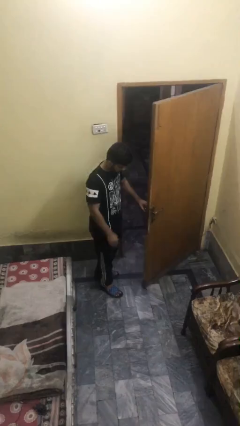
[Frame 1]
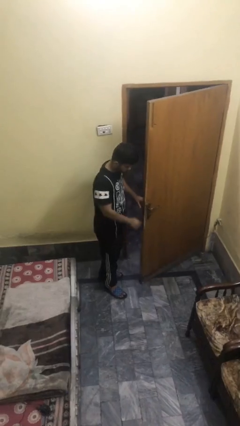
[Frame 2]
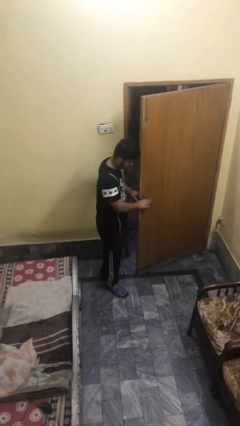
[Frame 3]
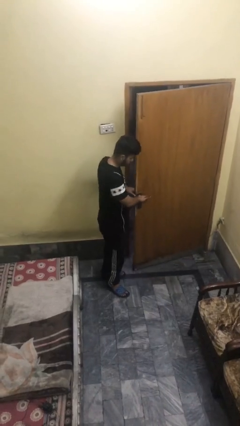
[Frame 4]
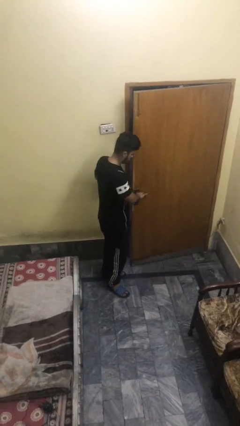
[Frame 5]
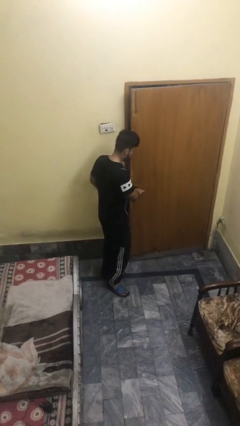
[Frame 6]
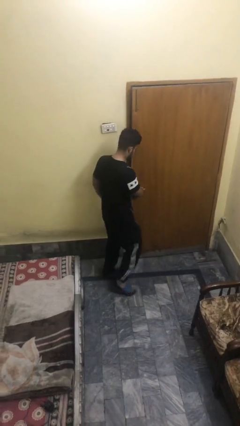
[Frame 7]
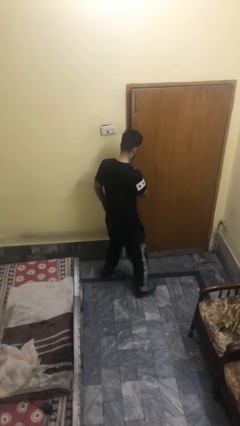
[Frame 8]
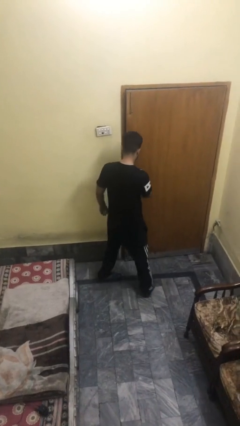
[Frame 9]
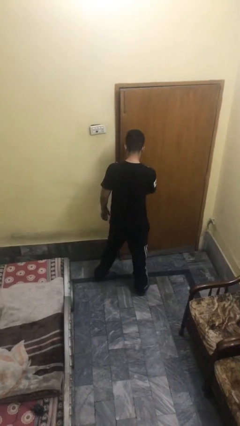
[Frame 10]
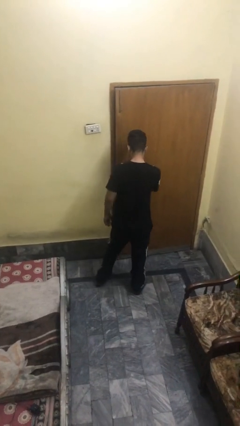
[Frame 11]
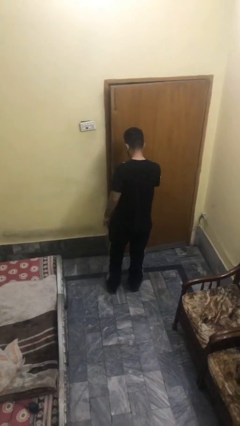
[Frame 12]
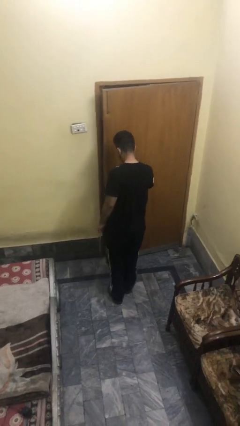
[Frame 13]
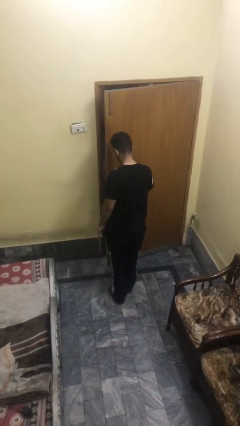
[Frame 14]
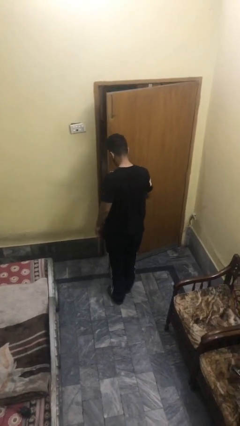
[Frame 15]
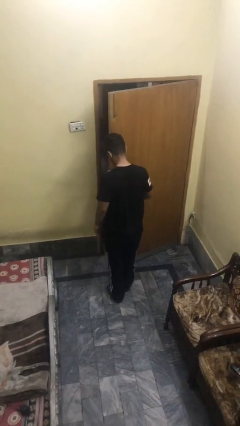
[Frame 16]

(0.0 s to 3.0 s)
person closes facility door

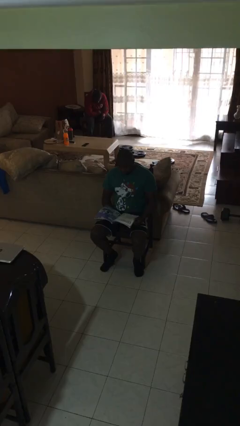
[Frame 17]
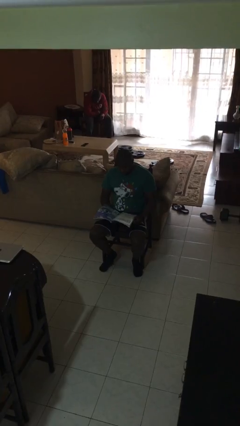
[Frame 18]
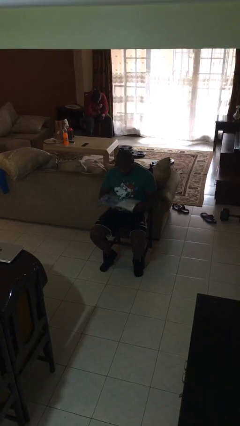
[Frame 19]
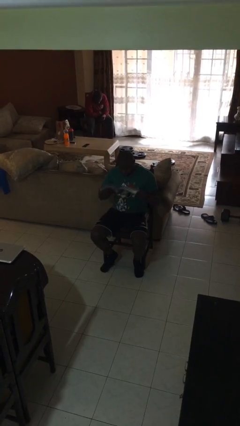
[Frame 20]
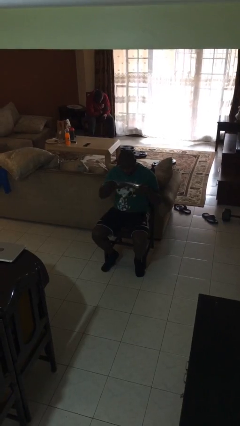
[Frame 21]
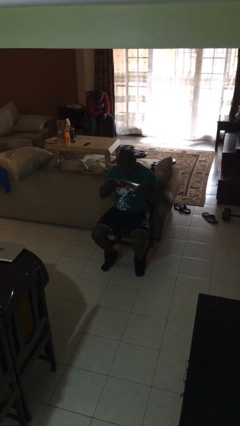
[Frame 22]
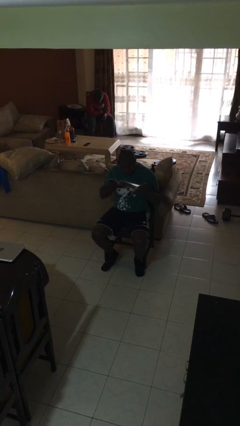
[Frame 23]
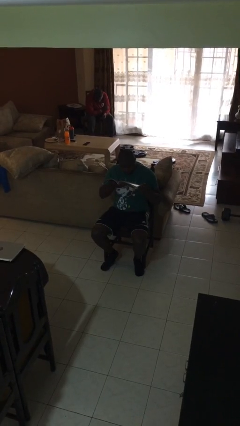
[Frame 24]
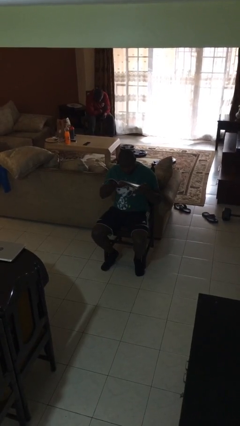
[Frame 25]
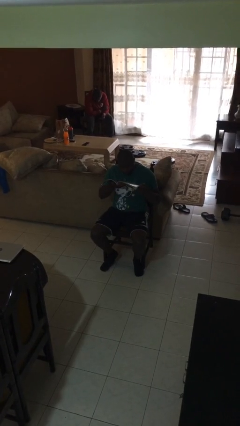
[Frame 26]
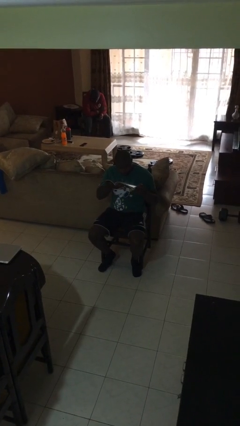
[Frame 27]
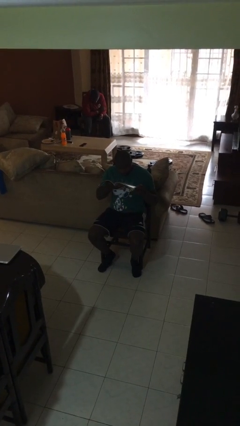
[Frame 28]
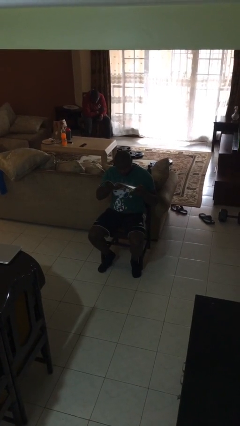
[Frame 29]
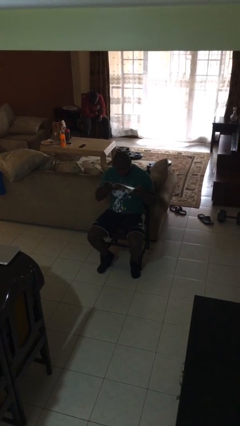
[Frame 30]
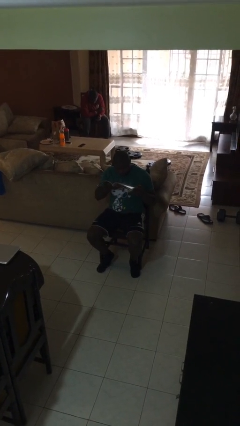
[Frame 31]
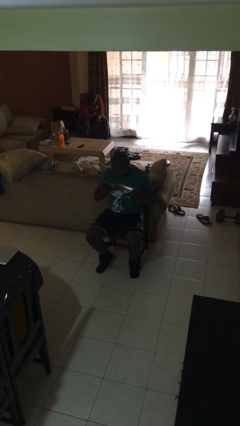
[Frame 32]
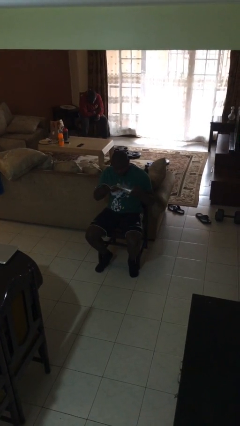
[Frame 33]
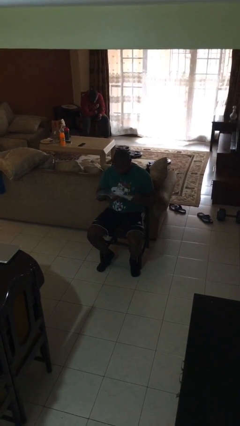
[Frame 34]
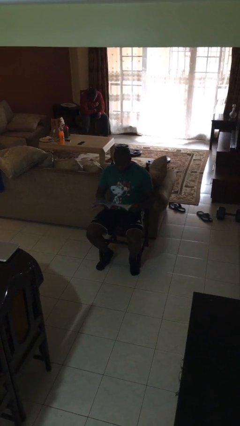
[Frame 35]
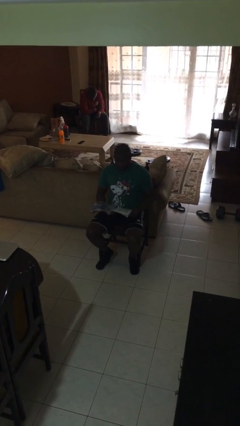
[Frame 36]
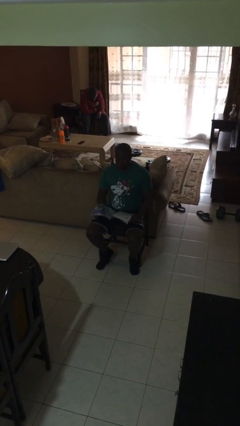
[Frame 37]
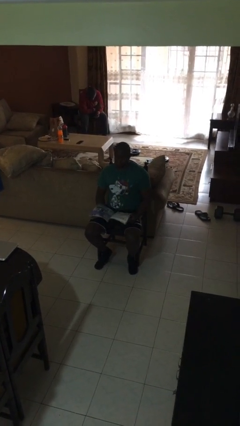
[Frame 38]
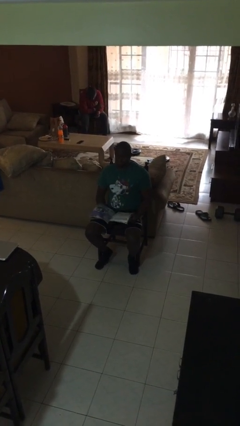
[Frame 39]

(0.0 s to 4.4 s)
person reads document

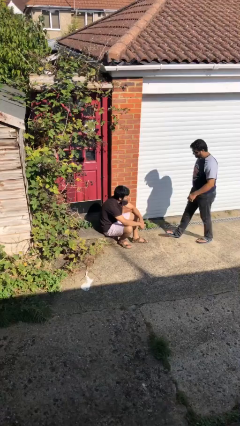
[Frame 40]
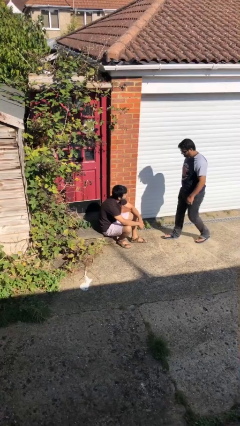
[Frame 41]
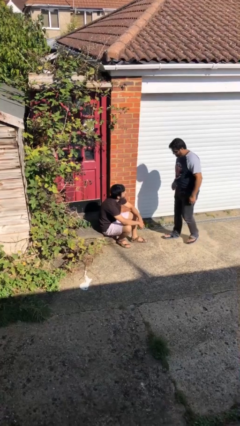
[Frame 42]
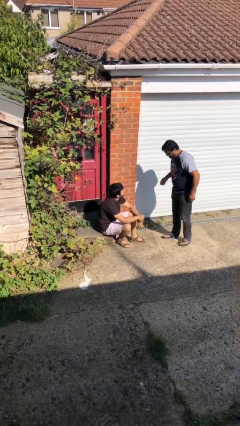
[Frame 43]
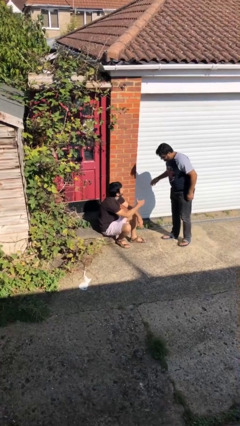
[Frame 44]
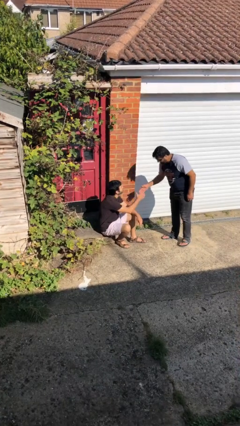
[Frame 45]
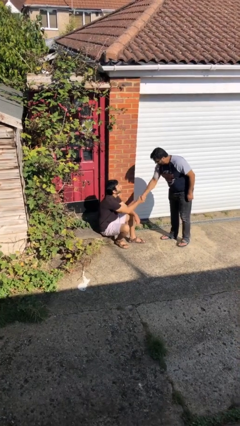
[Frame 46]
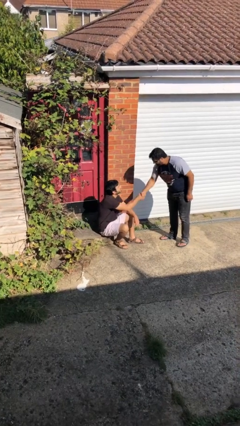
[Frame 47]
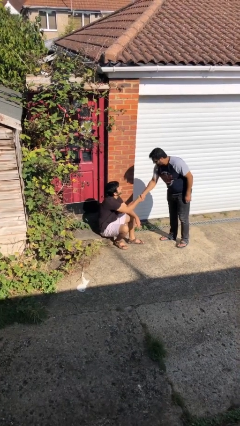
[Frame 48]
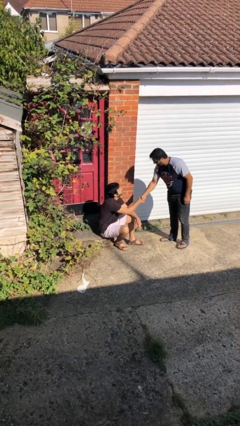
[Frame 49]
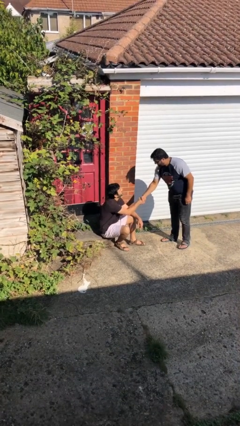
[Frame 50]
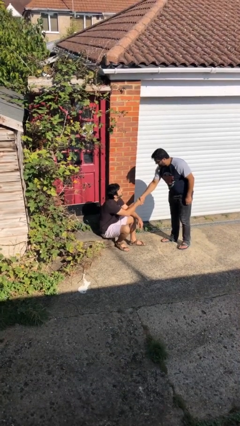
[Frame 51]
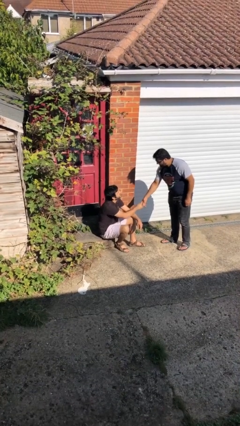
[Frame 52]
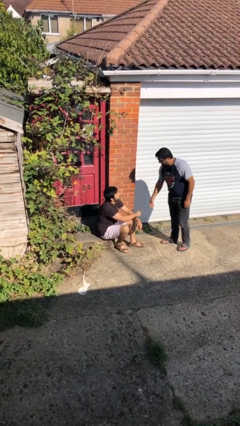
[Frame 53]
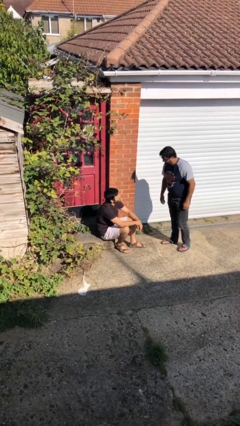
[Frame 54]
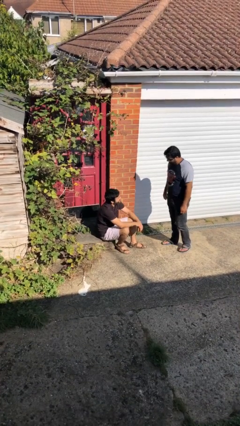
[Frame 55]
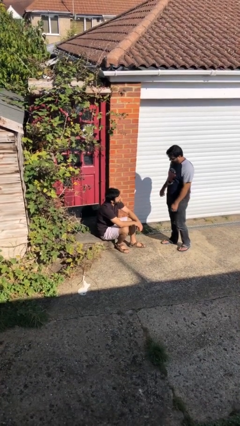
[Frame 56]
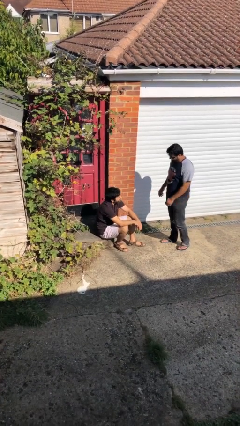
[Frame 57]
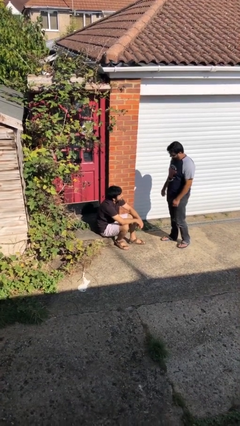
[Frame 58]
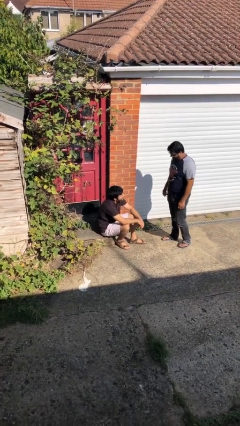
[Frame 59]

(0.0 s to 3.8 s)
person shakes hand

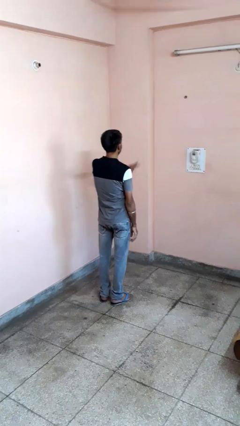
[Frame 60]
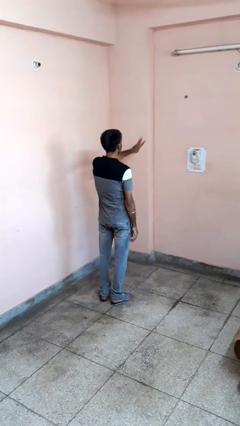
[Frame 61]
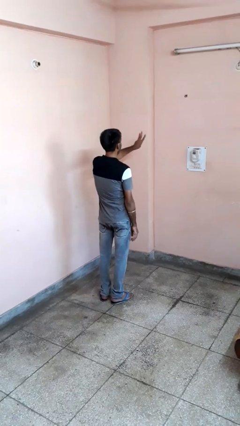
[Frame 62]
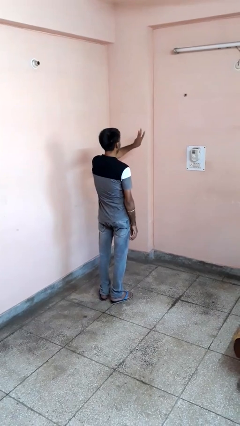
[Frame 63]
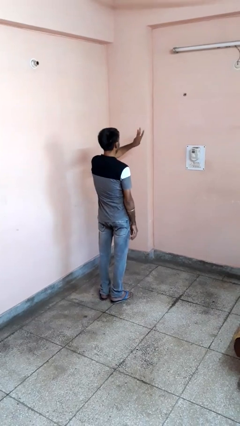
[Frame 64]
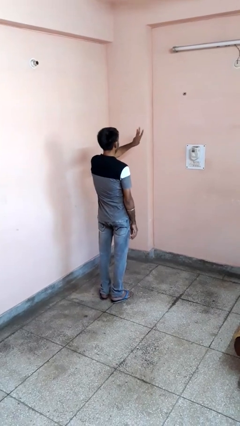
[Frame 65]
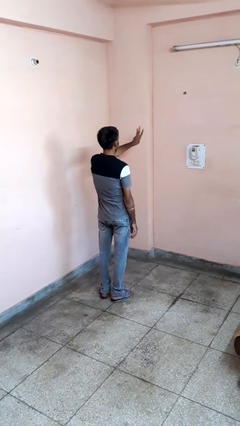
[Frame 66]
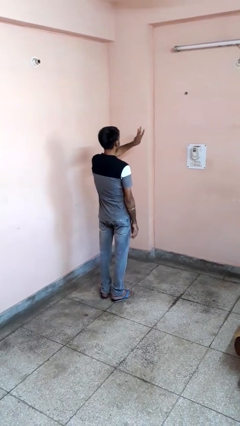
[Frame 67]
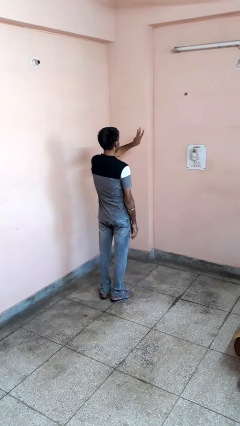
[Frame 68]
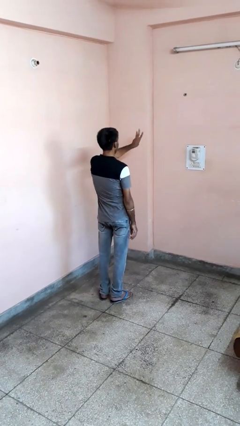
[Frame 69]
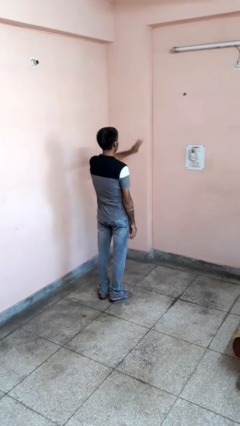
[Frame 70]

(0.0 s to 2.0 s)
person gestures number three

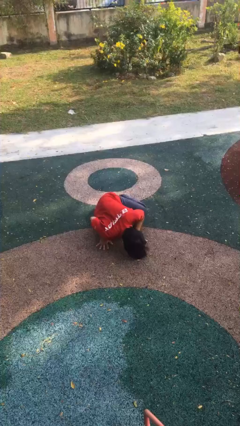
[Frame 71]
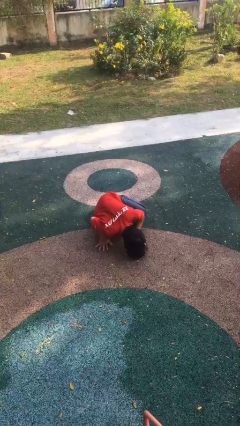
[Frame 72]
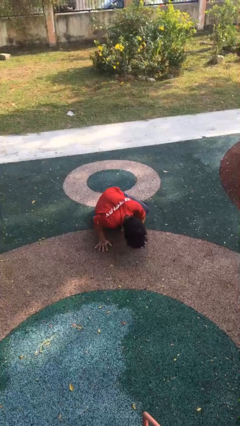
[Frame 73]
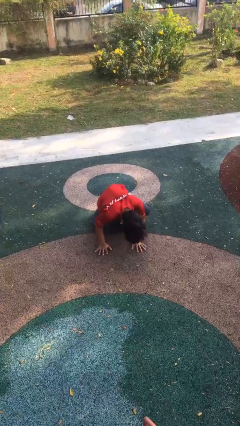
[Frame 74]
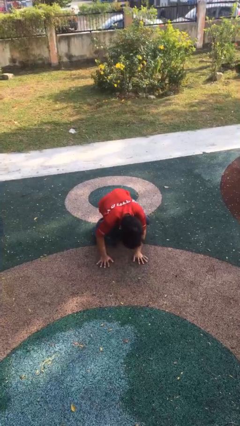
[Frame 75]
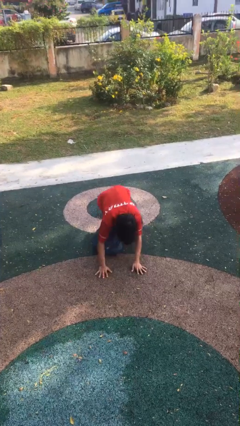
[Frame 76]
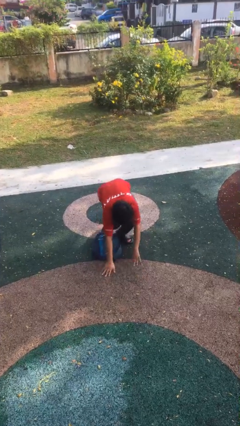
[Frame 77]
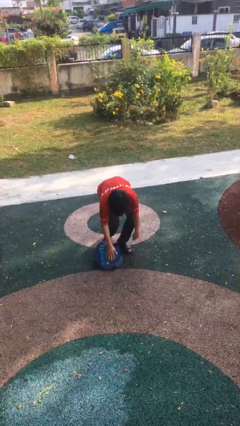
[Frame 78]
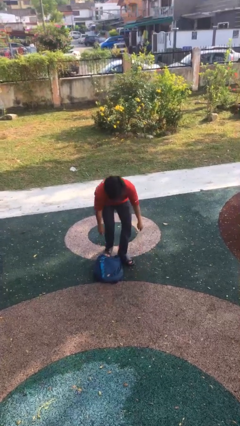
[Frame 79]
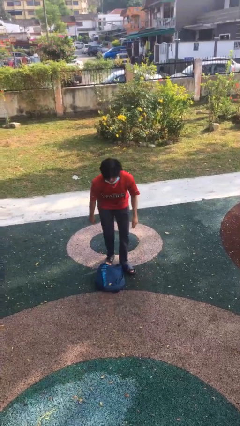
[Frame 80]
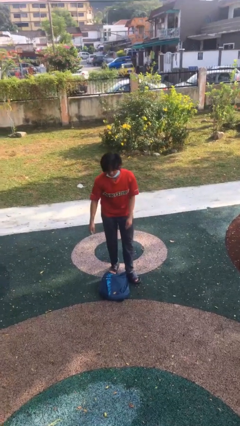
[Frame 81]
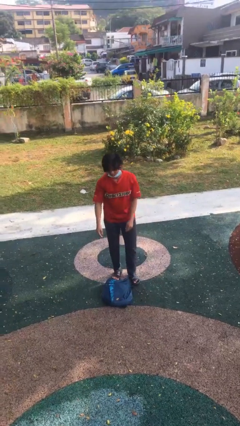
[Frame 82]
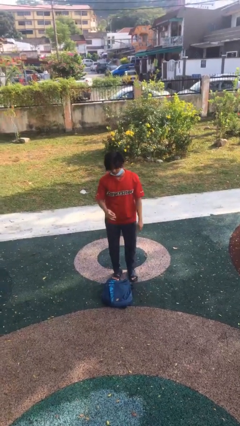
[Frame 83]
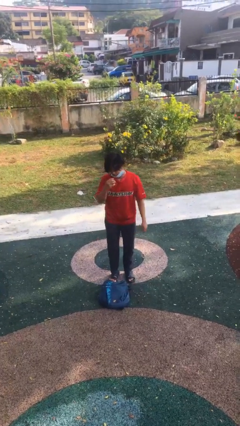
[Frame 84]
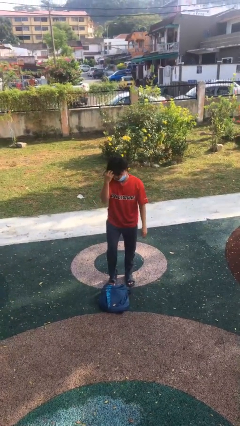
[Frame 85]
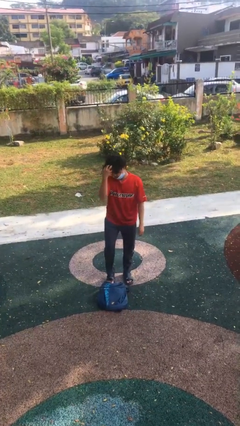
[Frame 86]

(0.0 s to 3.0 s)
person stands up from floor

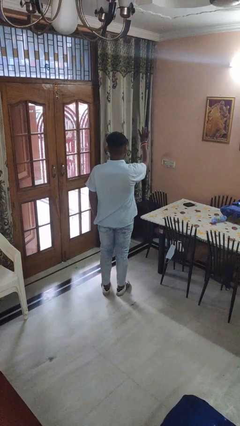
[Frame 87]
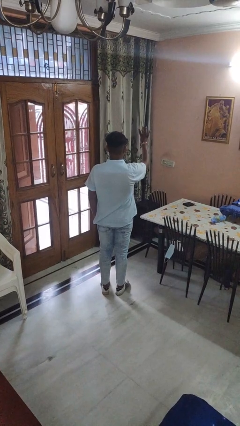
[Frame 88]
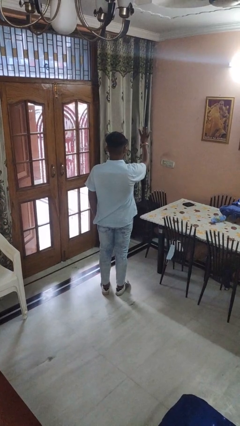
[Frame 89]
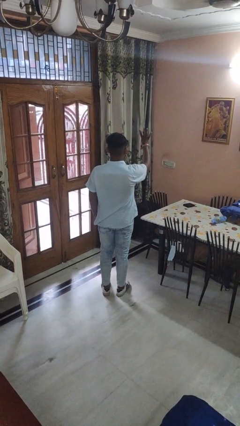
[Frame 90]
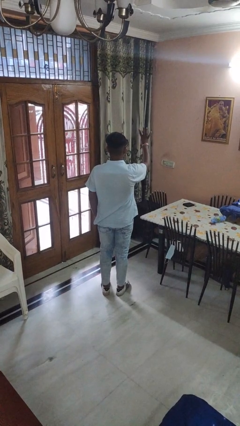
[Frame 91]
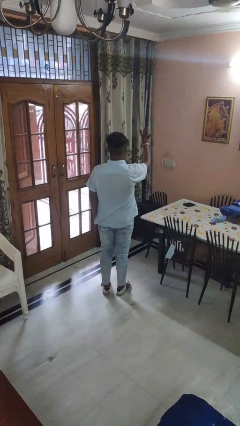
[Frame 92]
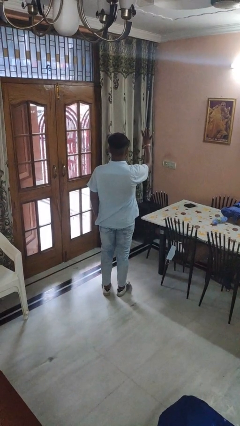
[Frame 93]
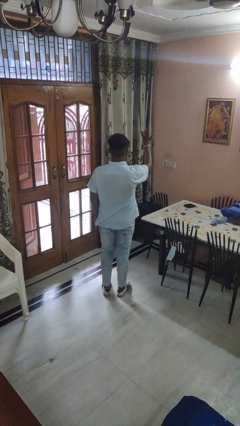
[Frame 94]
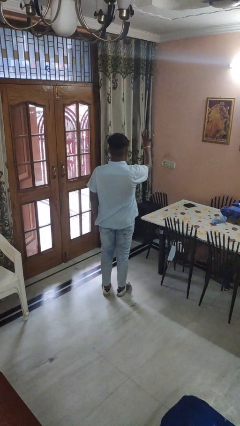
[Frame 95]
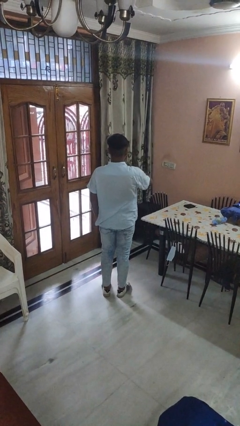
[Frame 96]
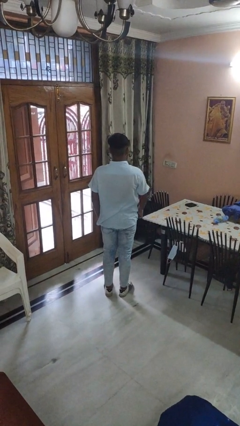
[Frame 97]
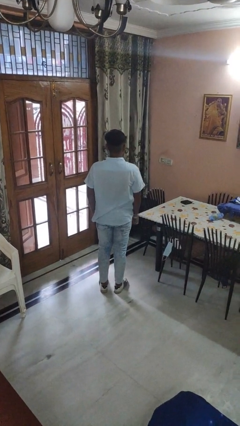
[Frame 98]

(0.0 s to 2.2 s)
person gestures number four
